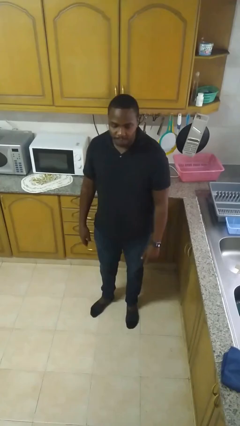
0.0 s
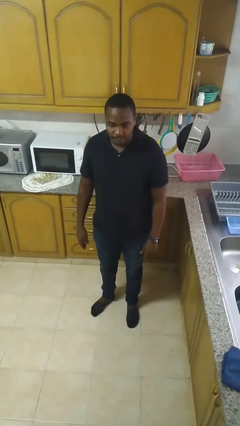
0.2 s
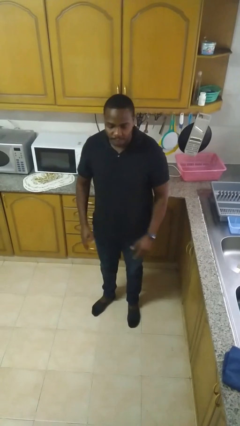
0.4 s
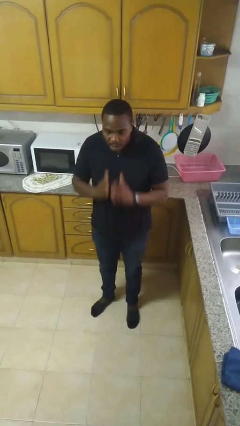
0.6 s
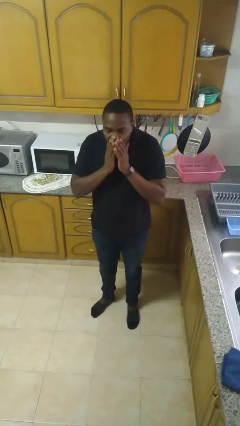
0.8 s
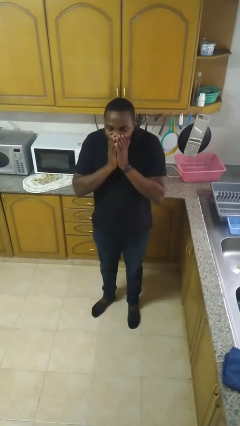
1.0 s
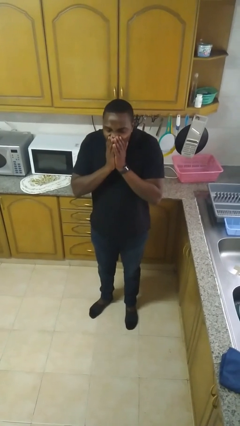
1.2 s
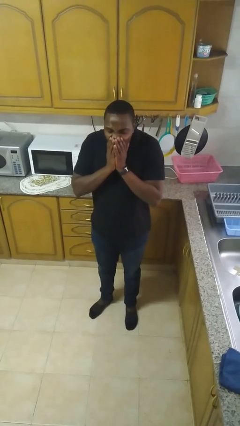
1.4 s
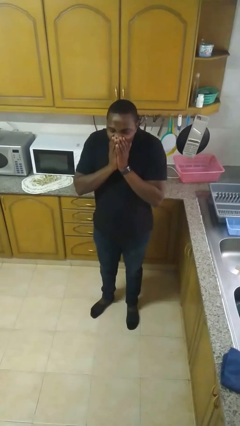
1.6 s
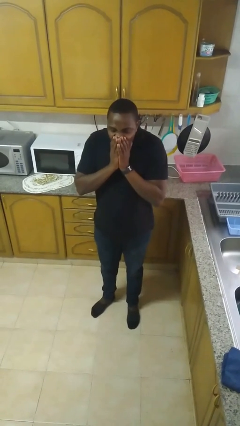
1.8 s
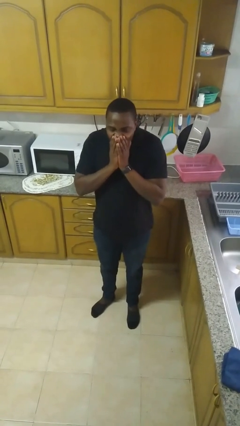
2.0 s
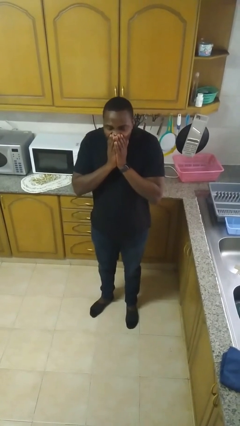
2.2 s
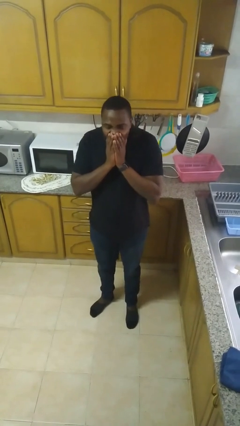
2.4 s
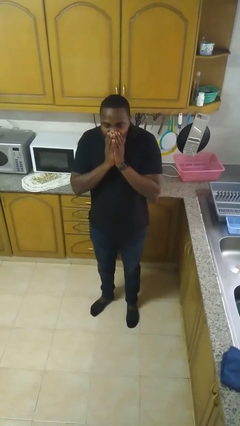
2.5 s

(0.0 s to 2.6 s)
person yawns

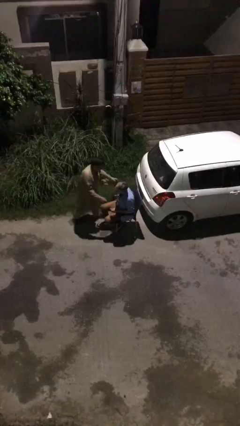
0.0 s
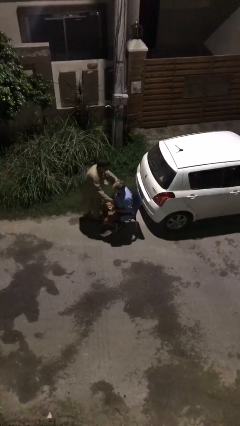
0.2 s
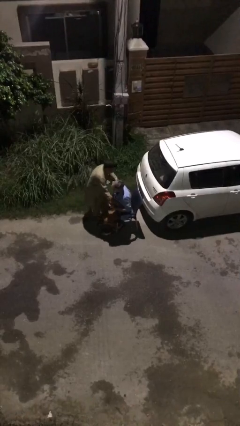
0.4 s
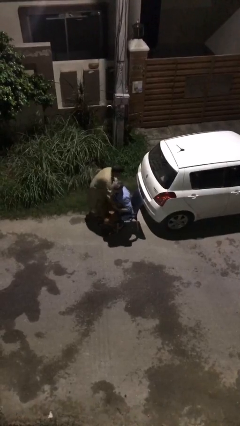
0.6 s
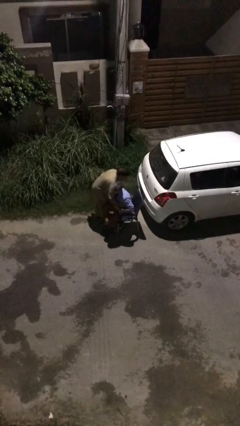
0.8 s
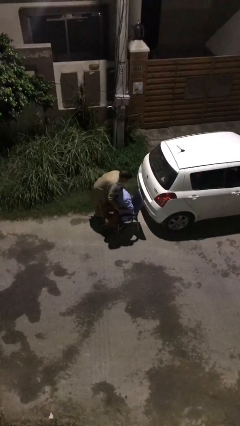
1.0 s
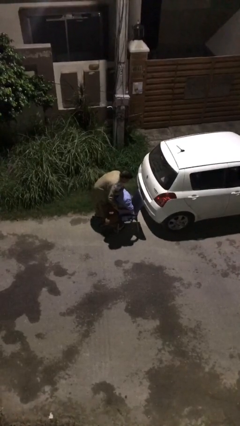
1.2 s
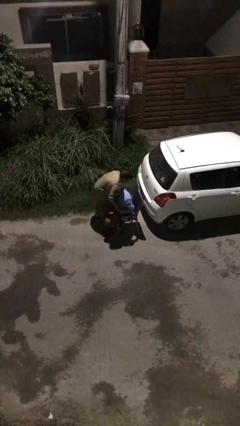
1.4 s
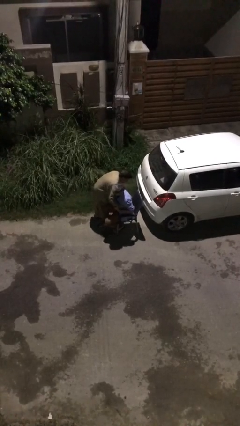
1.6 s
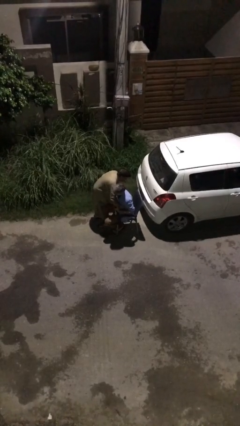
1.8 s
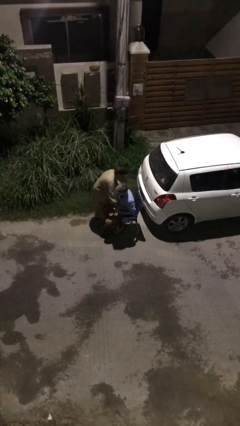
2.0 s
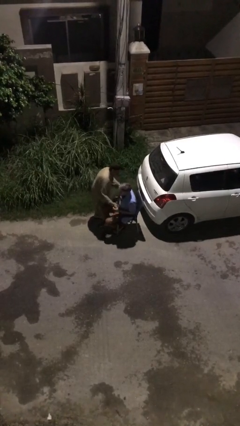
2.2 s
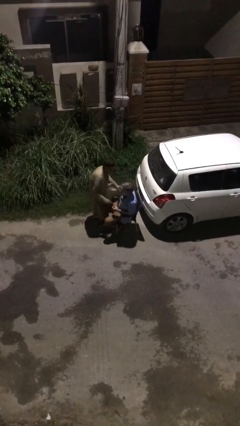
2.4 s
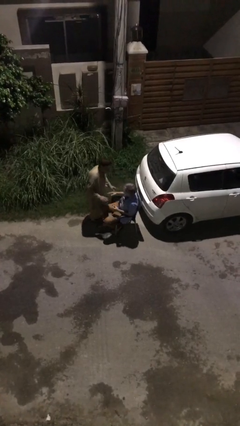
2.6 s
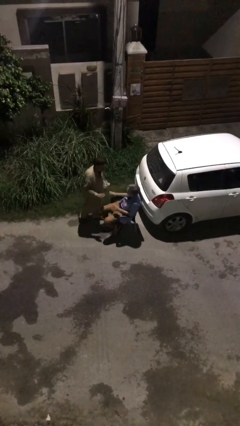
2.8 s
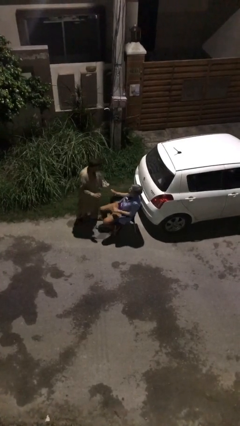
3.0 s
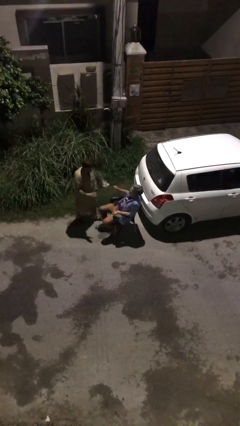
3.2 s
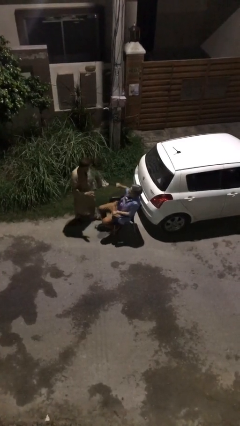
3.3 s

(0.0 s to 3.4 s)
person embraces person

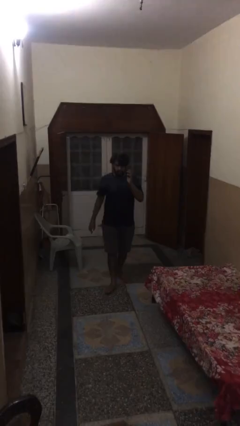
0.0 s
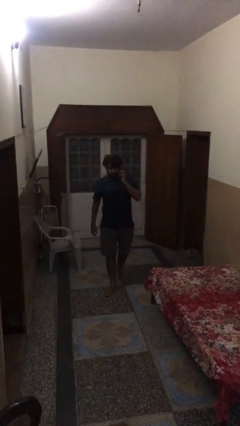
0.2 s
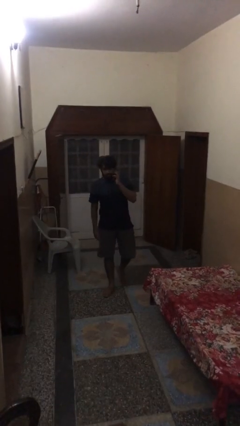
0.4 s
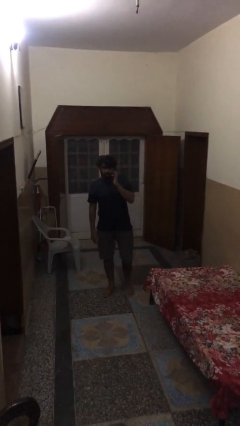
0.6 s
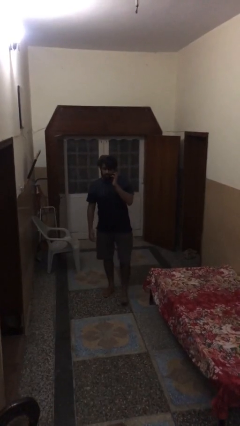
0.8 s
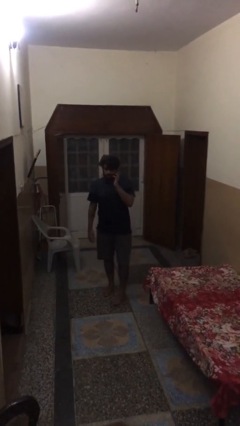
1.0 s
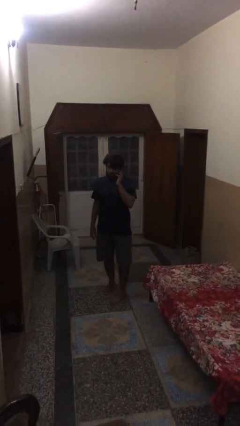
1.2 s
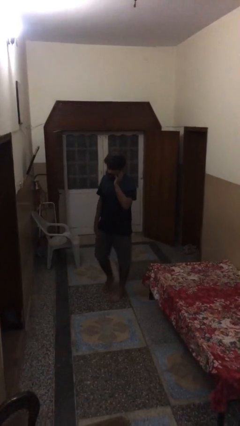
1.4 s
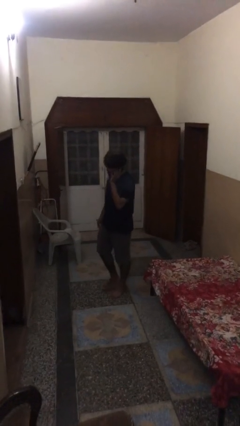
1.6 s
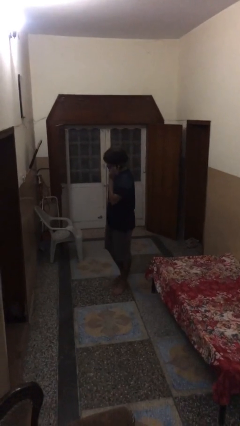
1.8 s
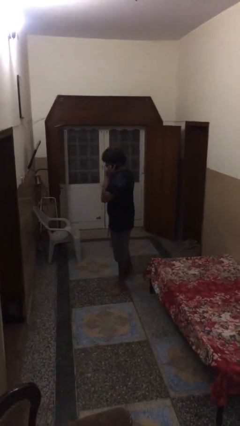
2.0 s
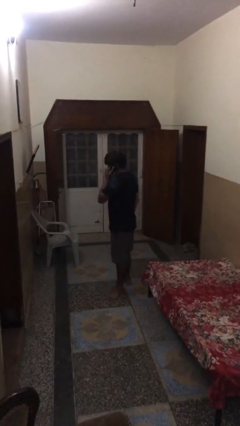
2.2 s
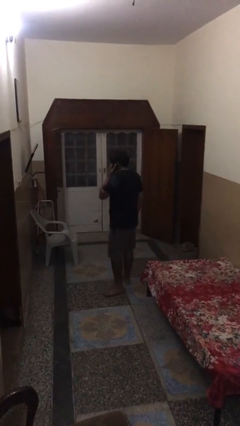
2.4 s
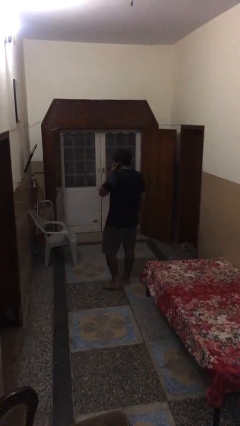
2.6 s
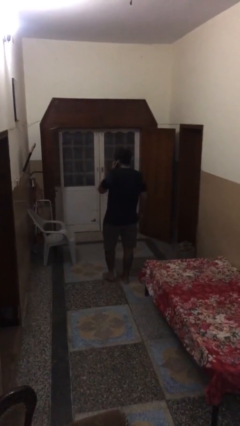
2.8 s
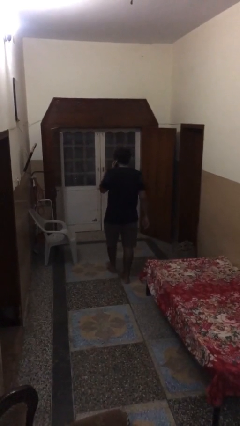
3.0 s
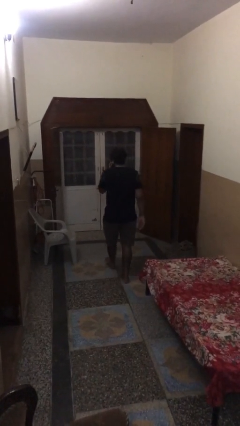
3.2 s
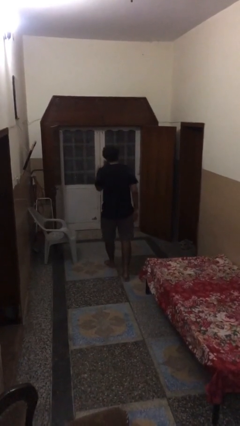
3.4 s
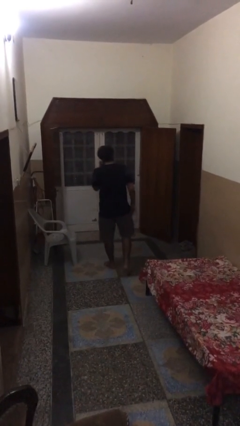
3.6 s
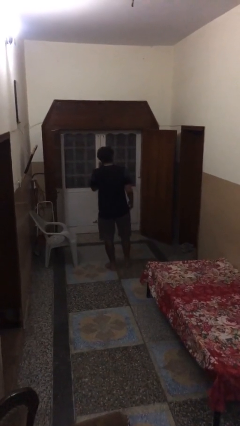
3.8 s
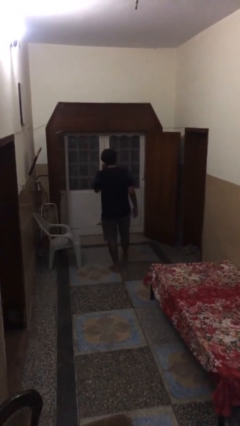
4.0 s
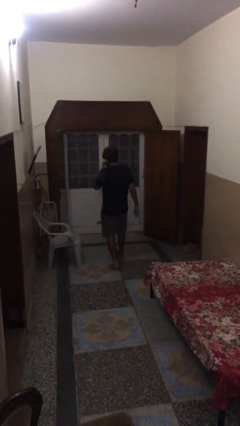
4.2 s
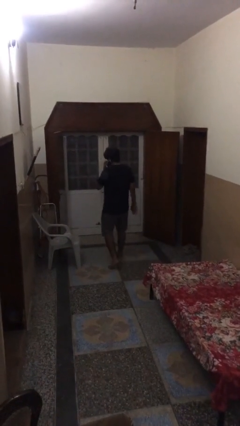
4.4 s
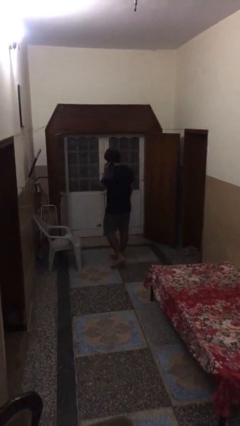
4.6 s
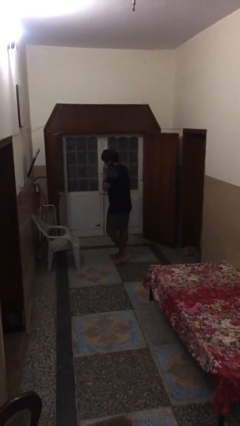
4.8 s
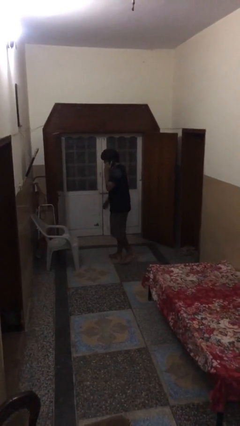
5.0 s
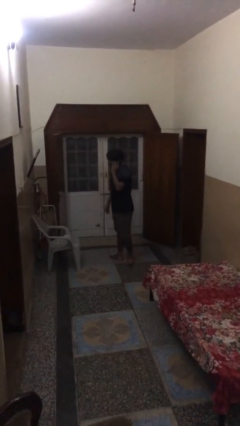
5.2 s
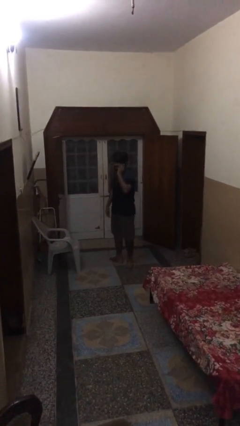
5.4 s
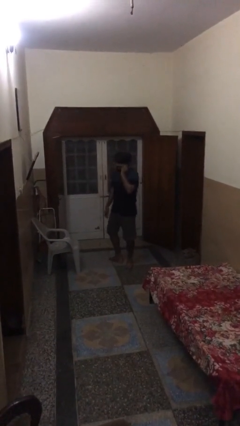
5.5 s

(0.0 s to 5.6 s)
person talks on phone

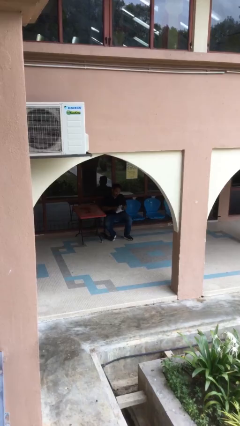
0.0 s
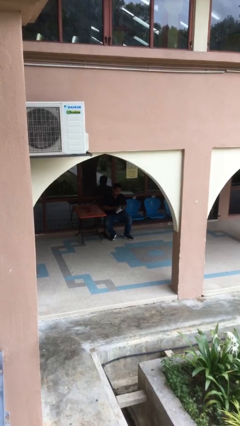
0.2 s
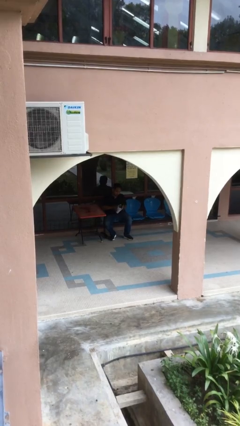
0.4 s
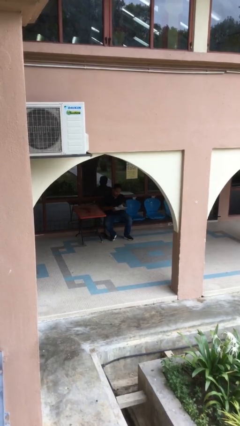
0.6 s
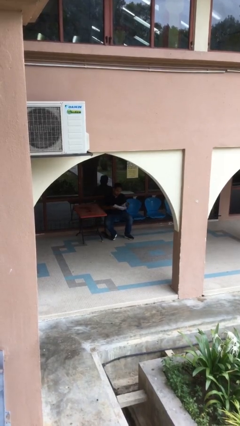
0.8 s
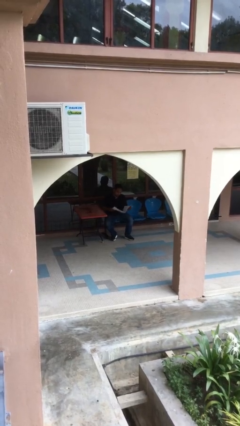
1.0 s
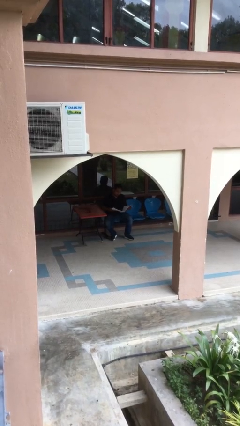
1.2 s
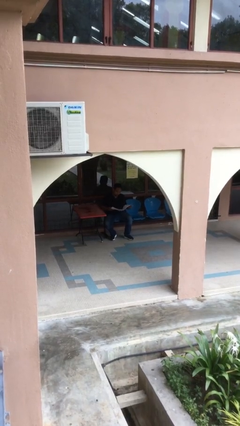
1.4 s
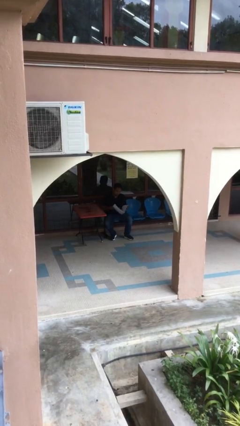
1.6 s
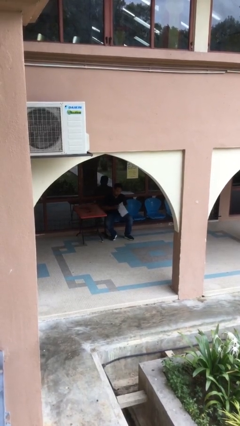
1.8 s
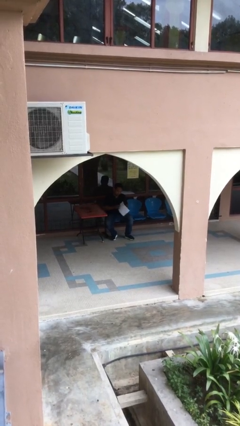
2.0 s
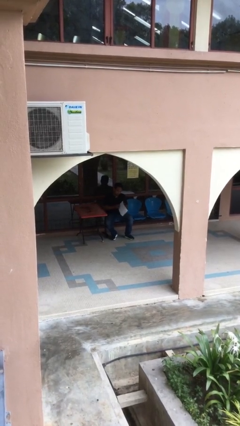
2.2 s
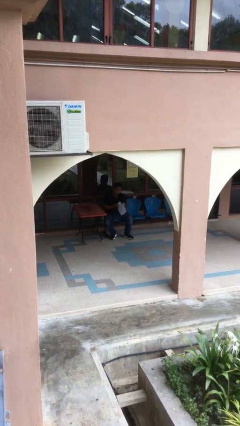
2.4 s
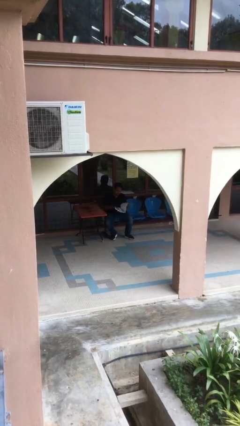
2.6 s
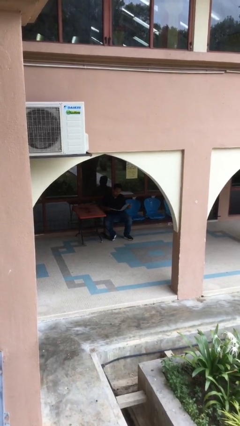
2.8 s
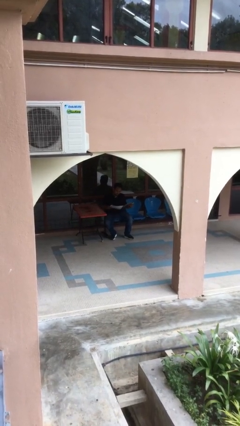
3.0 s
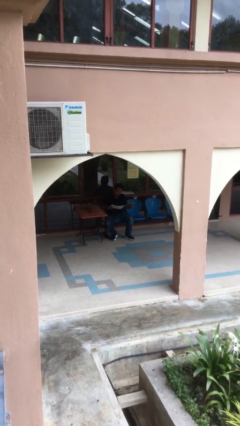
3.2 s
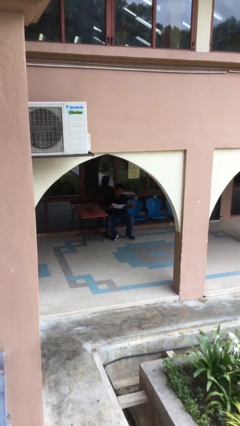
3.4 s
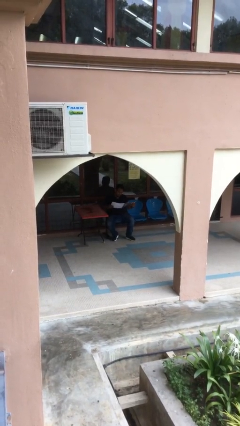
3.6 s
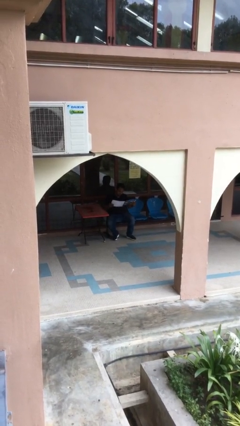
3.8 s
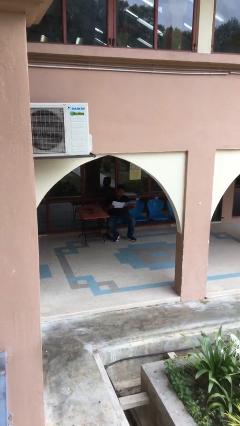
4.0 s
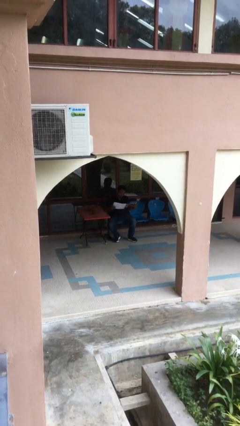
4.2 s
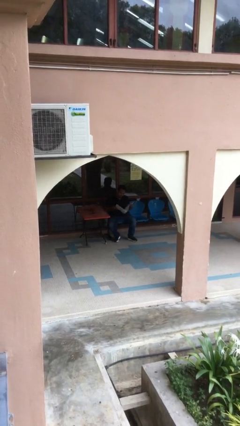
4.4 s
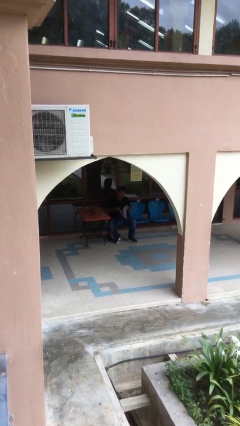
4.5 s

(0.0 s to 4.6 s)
person reads document

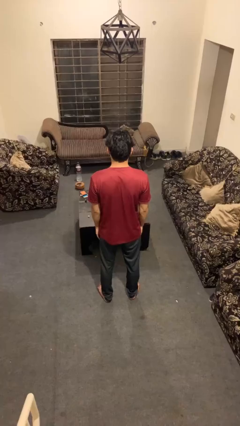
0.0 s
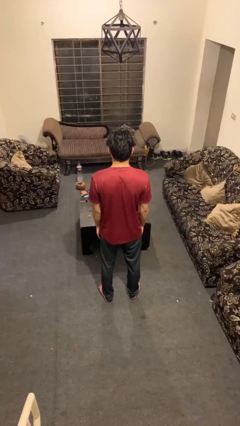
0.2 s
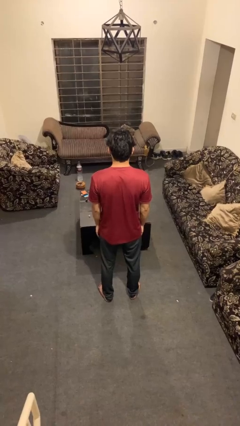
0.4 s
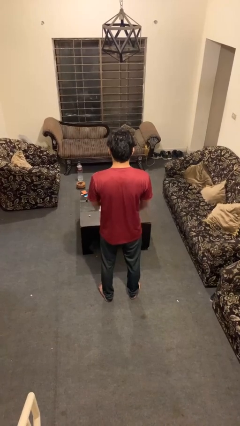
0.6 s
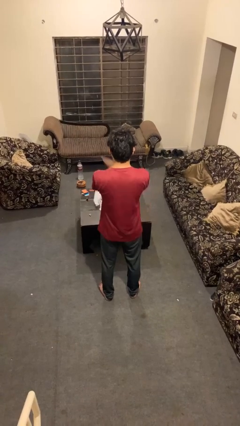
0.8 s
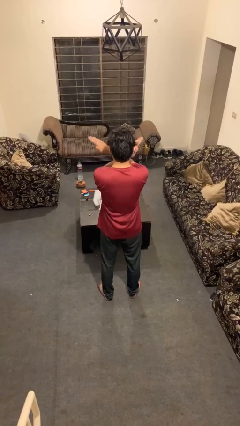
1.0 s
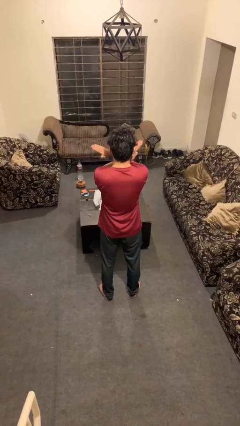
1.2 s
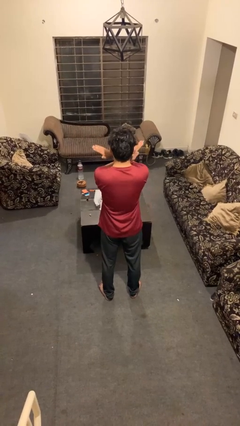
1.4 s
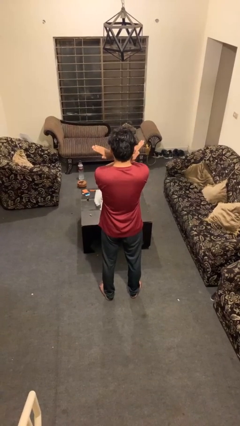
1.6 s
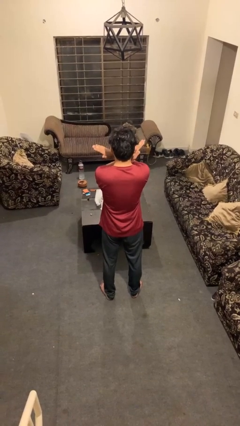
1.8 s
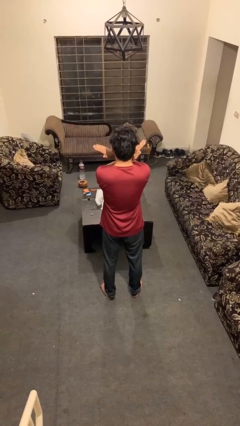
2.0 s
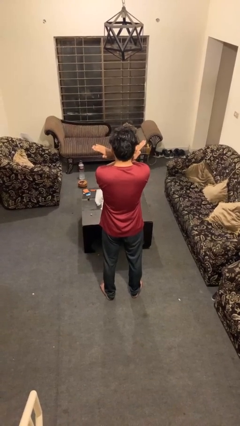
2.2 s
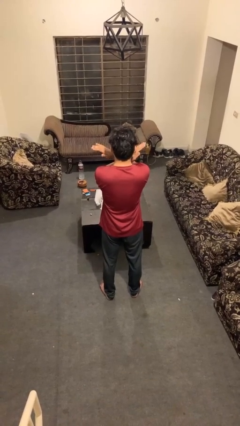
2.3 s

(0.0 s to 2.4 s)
person gestures arms x
